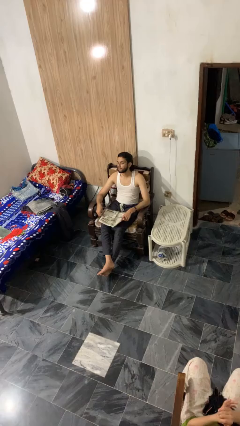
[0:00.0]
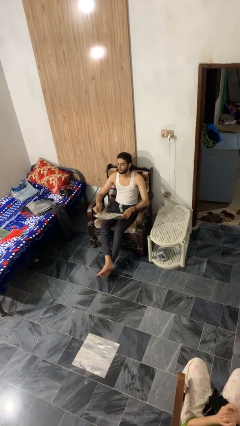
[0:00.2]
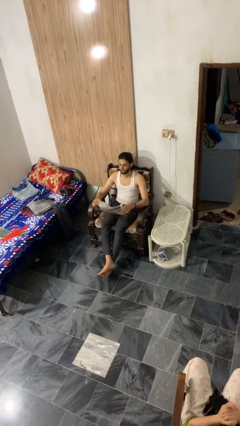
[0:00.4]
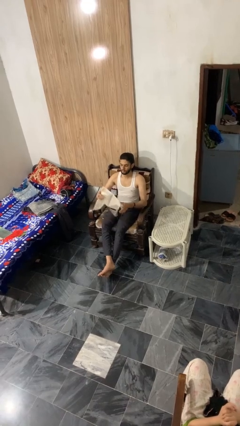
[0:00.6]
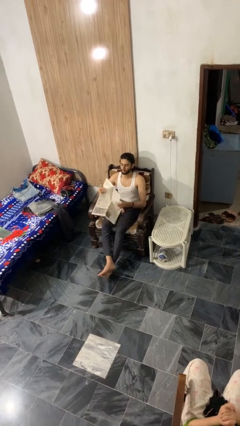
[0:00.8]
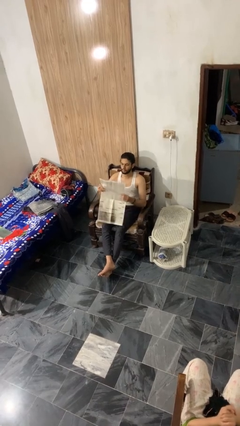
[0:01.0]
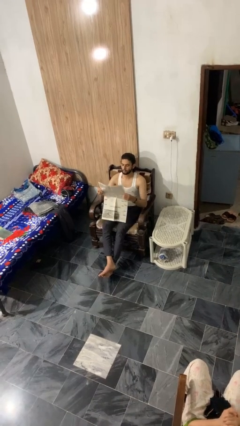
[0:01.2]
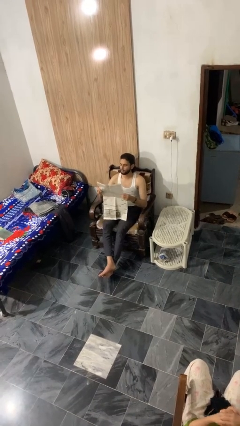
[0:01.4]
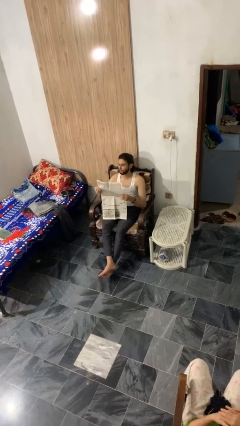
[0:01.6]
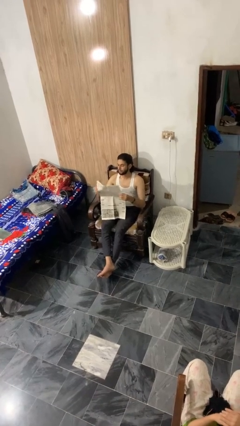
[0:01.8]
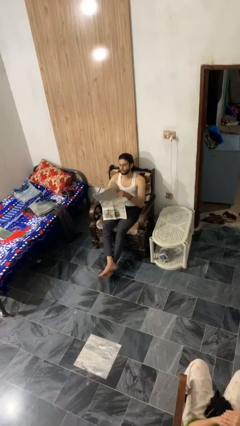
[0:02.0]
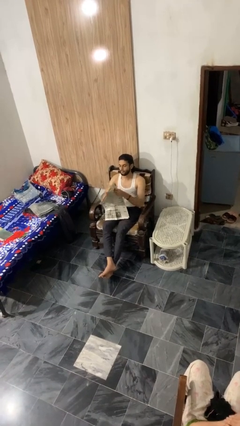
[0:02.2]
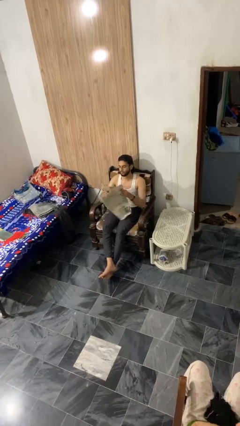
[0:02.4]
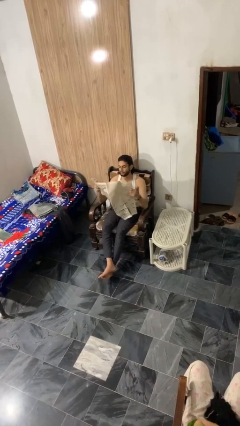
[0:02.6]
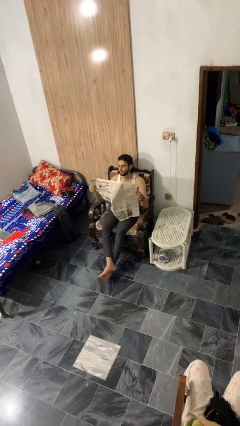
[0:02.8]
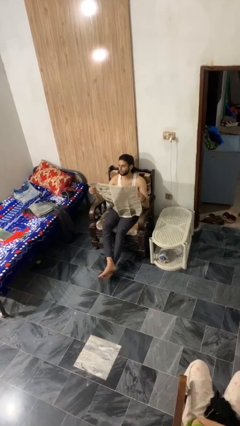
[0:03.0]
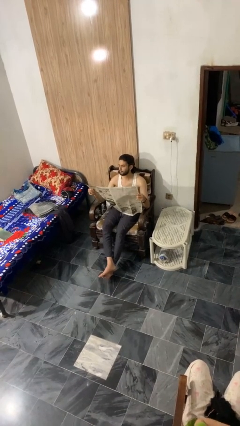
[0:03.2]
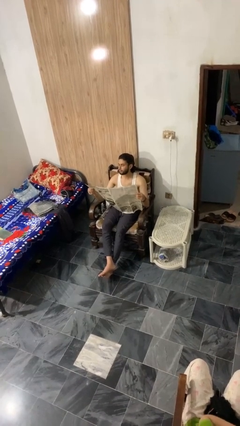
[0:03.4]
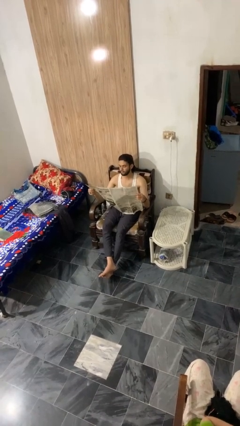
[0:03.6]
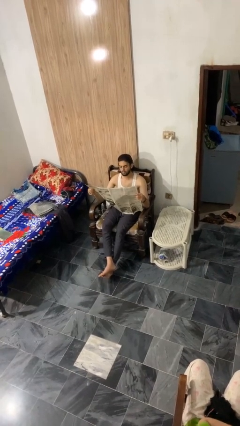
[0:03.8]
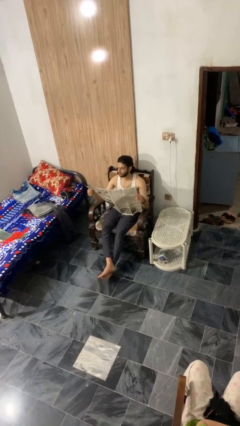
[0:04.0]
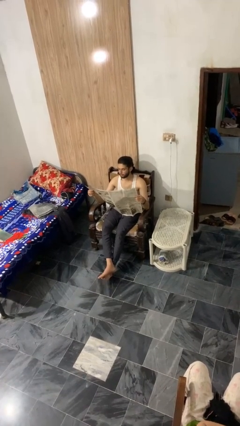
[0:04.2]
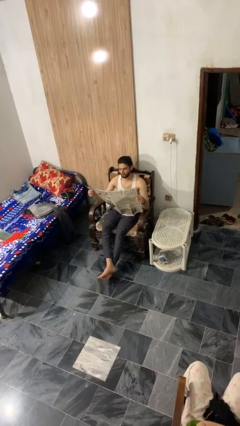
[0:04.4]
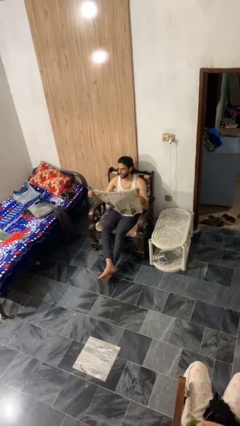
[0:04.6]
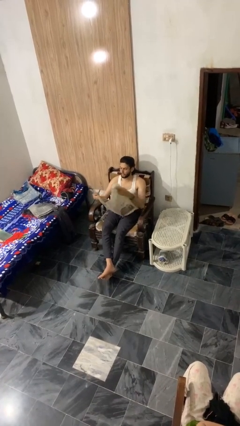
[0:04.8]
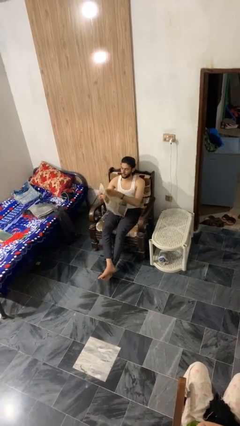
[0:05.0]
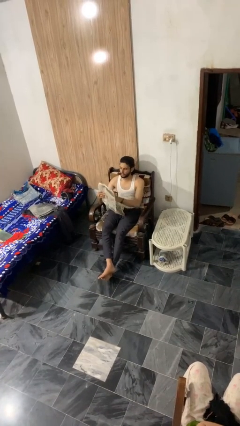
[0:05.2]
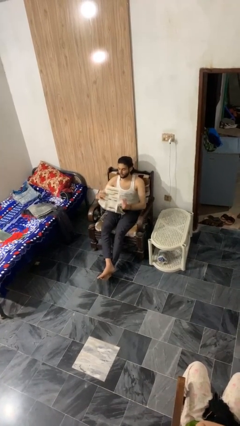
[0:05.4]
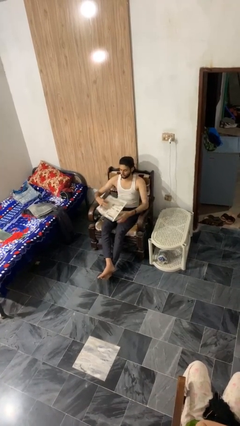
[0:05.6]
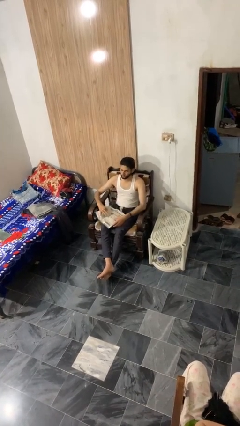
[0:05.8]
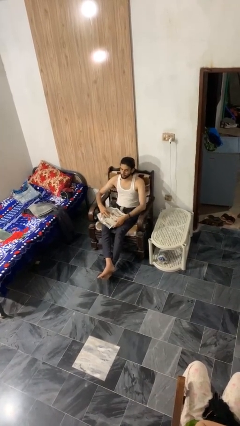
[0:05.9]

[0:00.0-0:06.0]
person reads newspaper

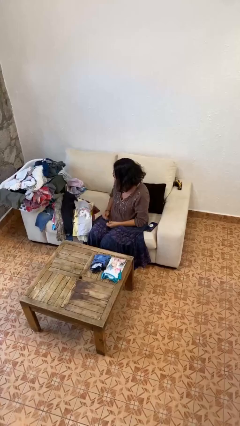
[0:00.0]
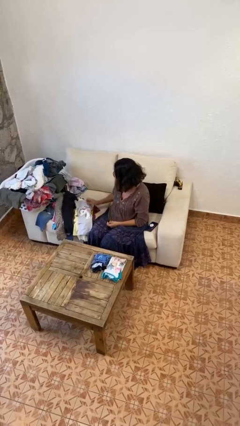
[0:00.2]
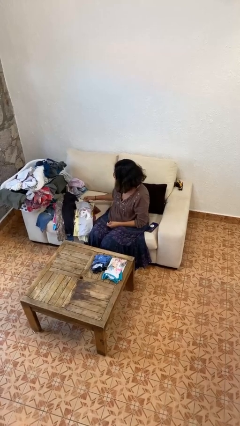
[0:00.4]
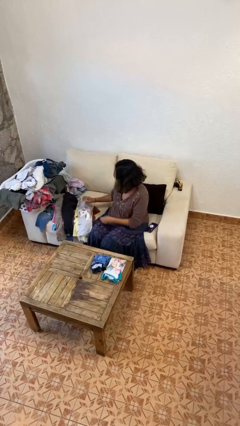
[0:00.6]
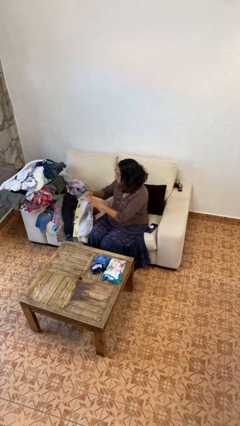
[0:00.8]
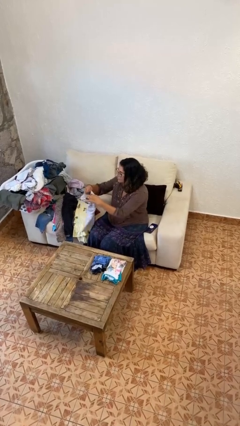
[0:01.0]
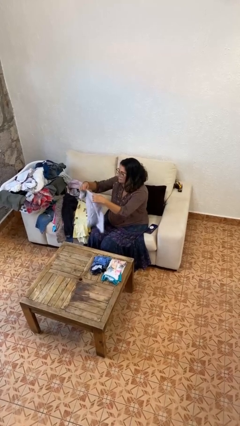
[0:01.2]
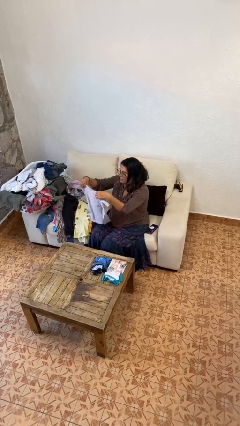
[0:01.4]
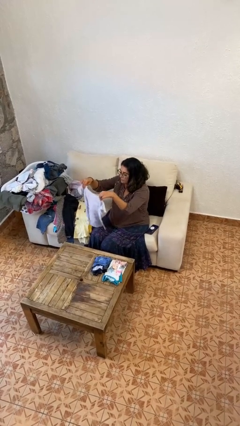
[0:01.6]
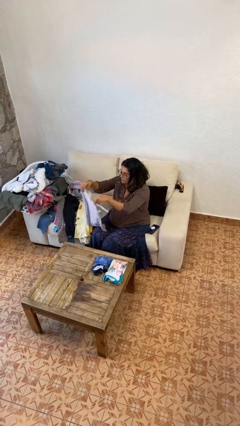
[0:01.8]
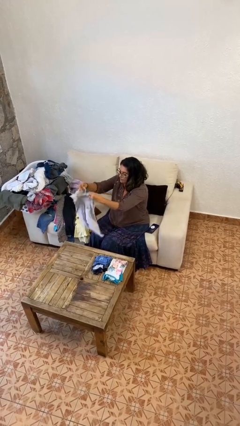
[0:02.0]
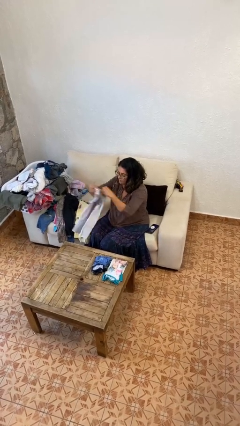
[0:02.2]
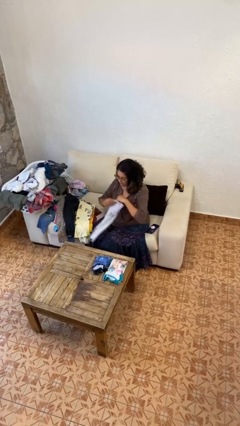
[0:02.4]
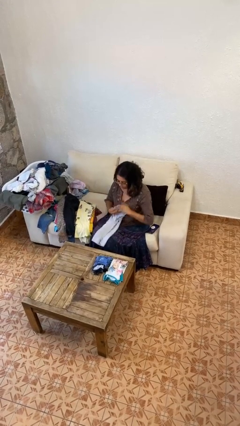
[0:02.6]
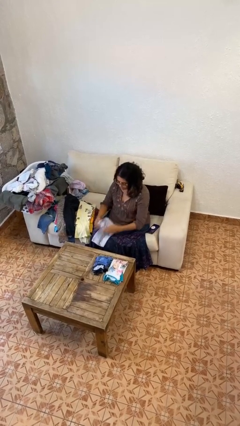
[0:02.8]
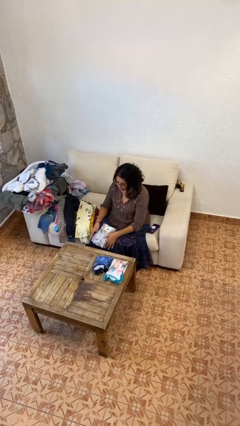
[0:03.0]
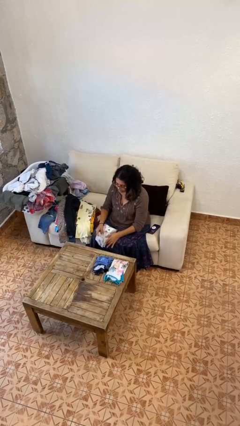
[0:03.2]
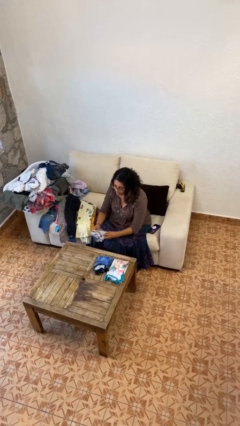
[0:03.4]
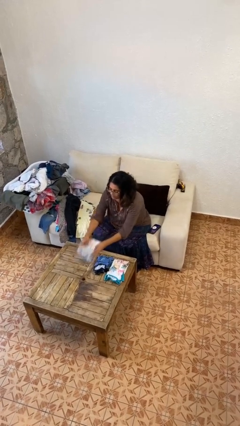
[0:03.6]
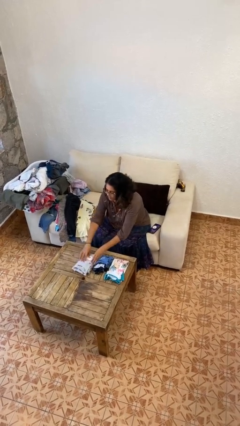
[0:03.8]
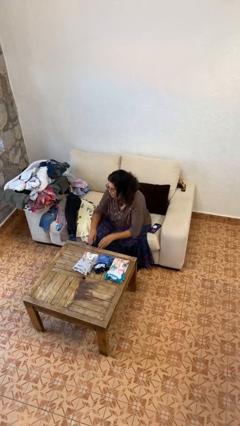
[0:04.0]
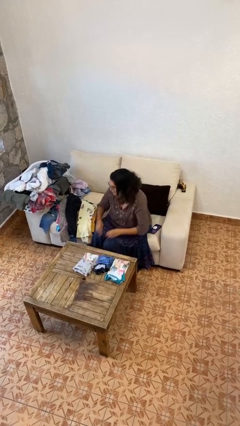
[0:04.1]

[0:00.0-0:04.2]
person folds shirt

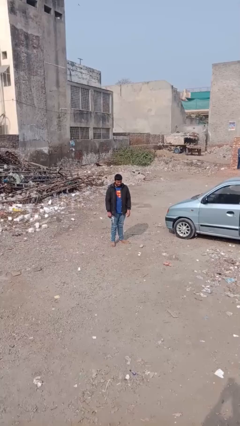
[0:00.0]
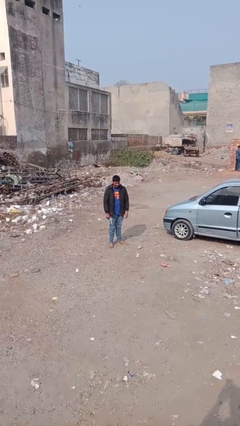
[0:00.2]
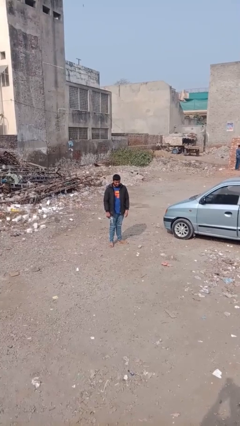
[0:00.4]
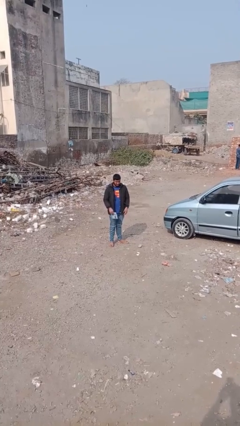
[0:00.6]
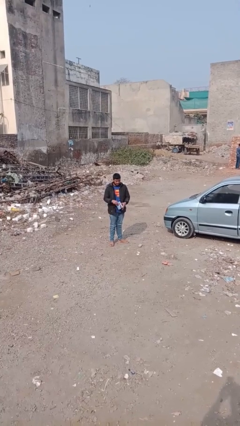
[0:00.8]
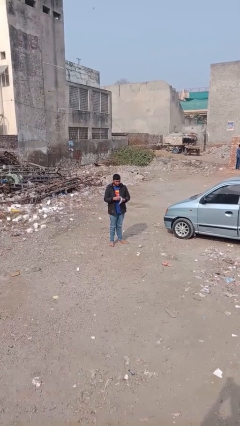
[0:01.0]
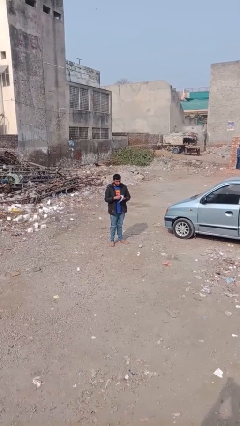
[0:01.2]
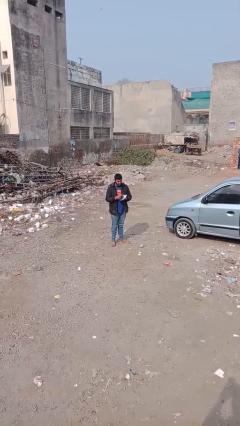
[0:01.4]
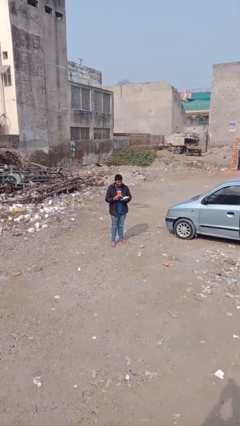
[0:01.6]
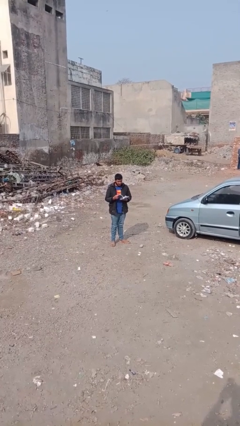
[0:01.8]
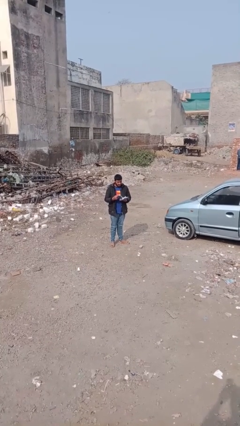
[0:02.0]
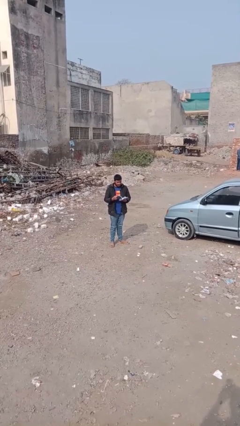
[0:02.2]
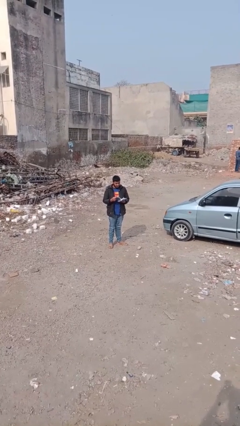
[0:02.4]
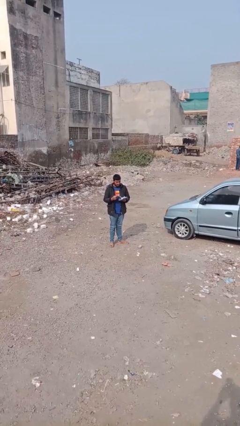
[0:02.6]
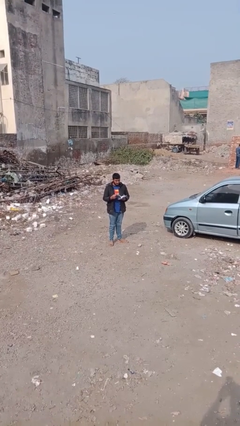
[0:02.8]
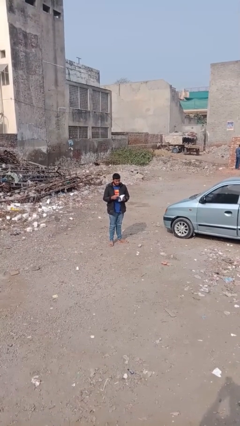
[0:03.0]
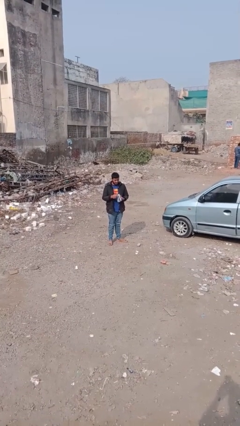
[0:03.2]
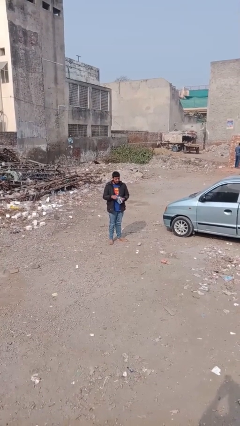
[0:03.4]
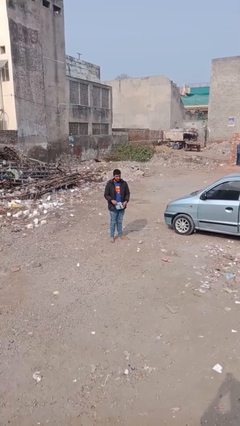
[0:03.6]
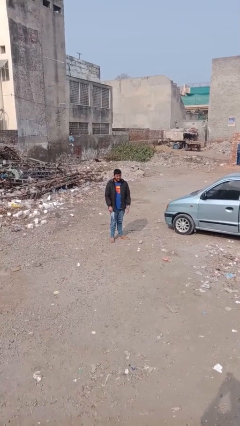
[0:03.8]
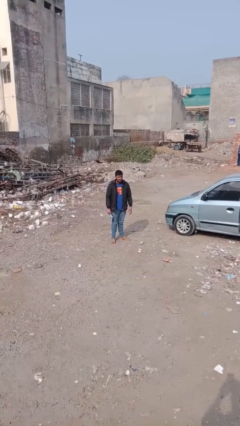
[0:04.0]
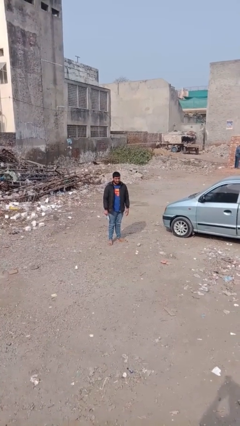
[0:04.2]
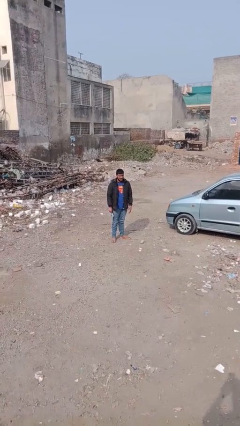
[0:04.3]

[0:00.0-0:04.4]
person reads document

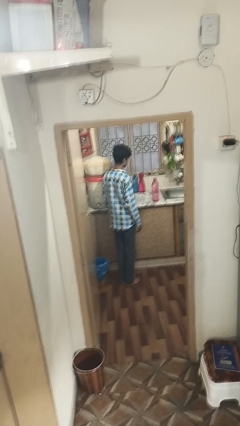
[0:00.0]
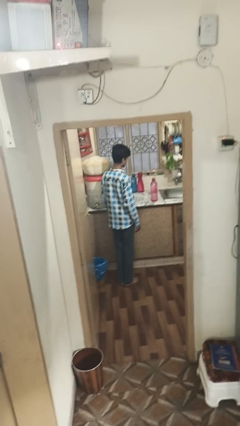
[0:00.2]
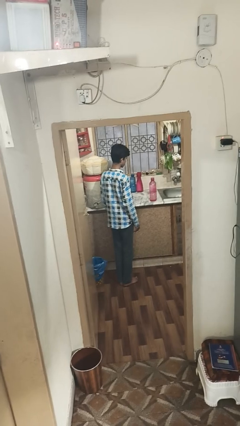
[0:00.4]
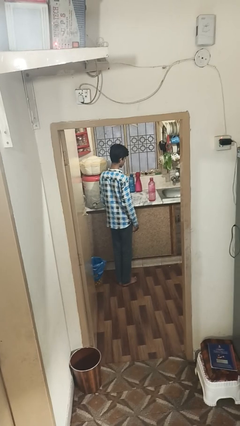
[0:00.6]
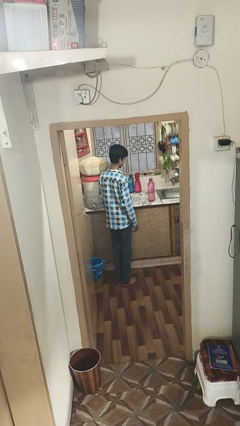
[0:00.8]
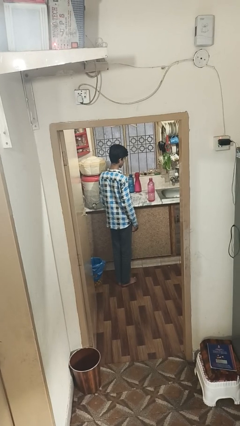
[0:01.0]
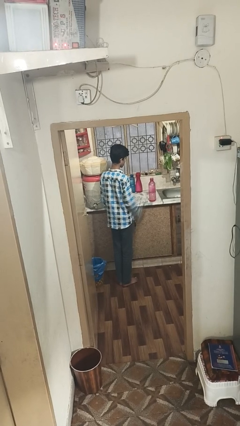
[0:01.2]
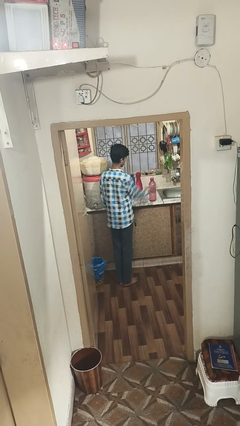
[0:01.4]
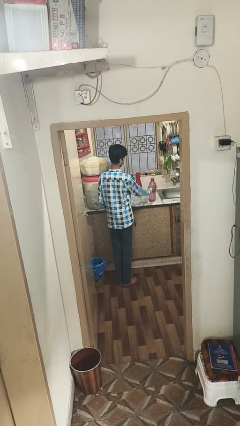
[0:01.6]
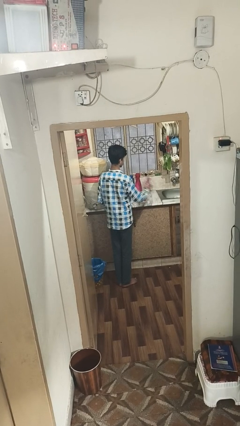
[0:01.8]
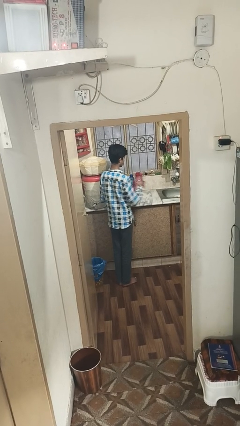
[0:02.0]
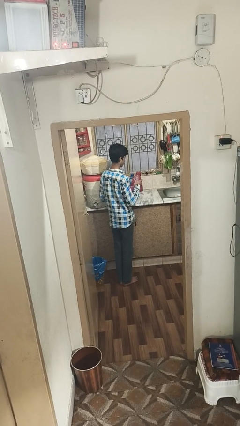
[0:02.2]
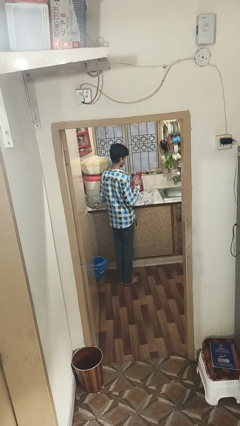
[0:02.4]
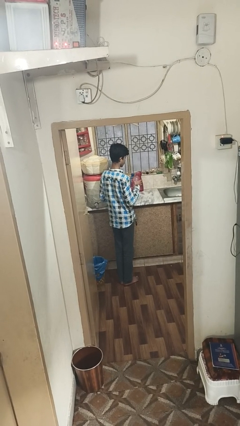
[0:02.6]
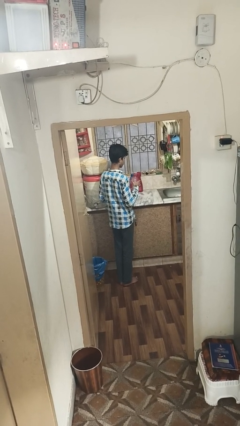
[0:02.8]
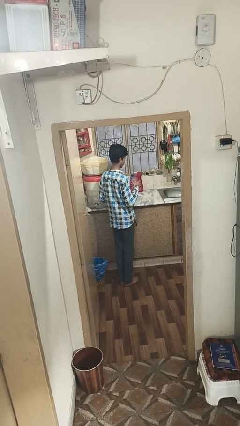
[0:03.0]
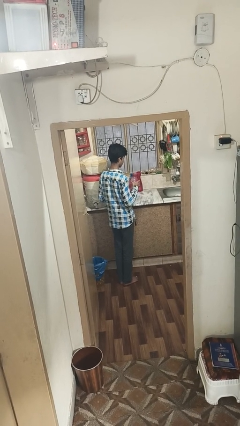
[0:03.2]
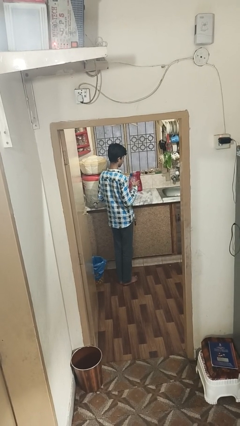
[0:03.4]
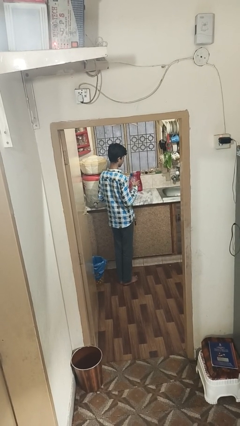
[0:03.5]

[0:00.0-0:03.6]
person picks up object from countertop
